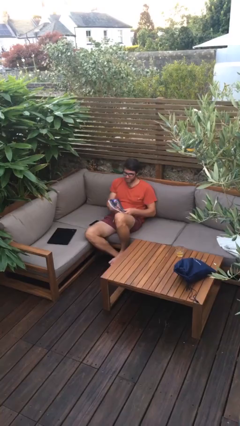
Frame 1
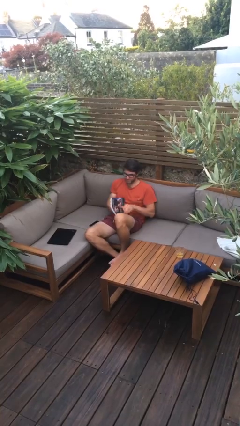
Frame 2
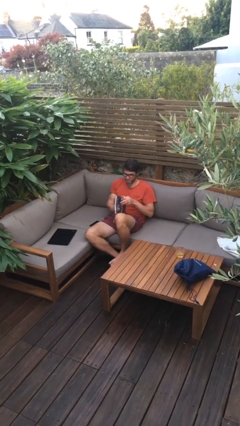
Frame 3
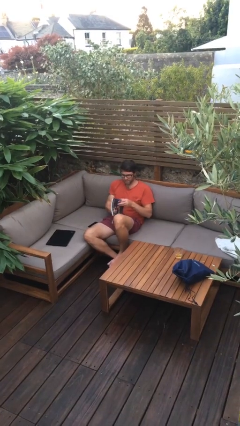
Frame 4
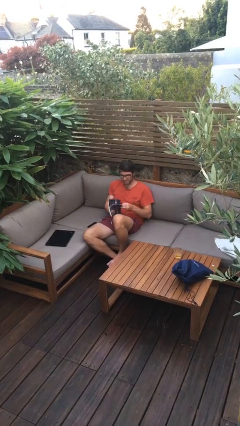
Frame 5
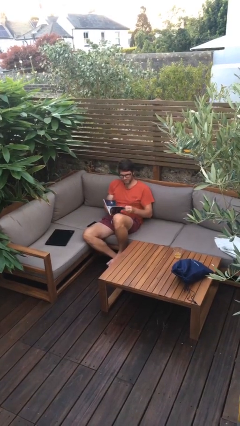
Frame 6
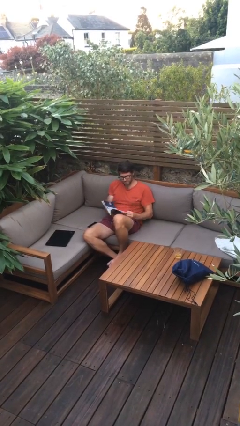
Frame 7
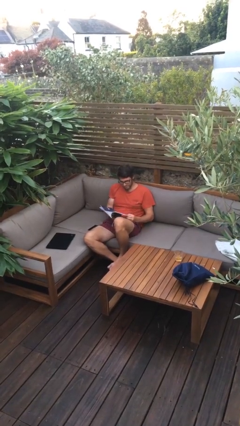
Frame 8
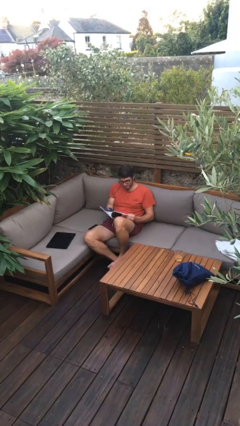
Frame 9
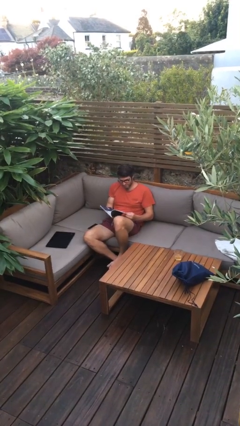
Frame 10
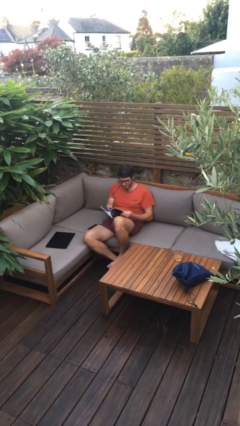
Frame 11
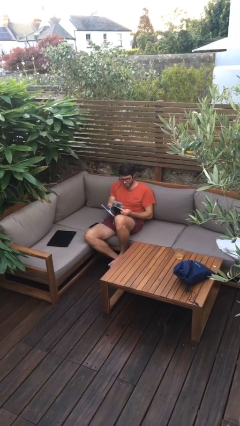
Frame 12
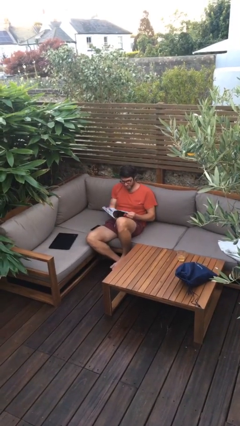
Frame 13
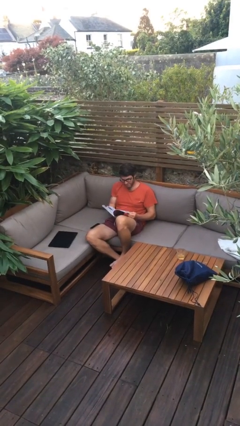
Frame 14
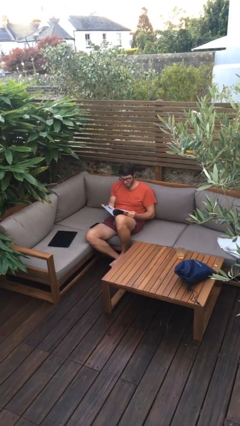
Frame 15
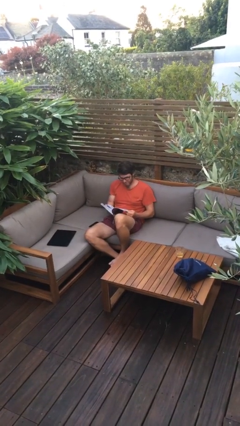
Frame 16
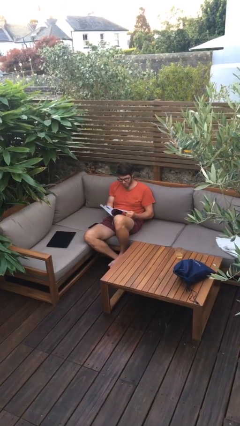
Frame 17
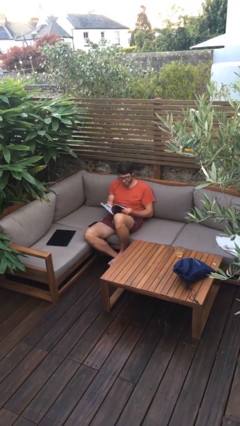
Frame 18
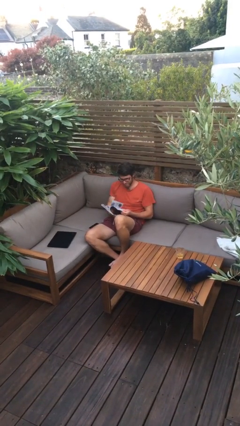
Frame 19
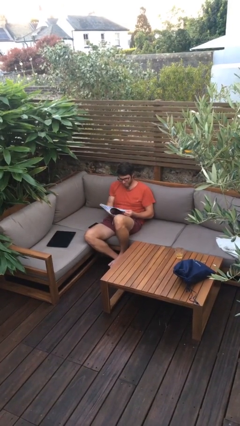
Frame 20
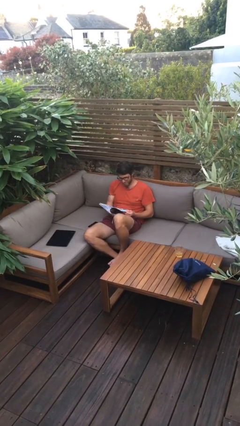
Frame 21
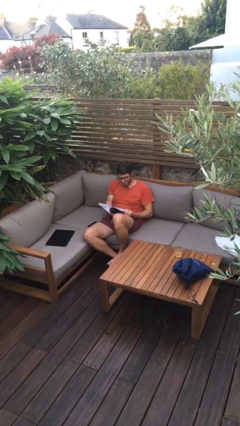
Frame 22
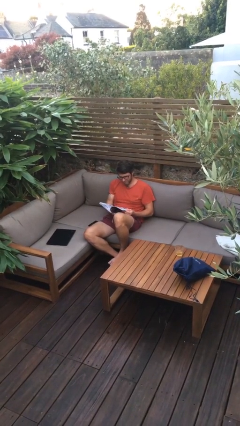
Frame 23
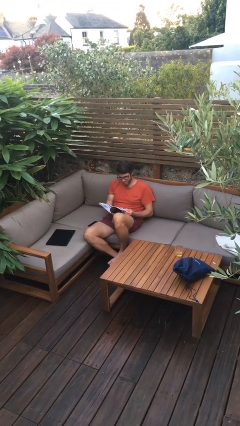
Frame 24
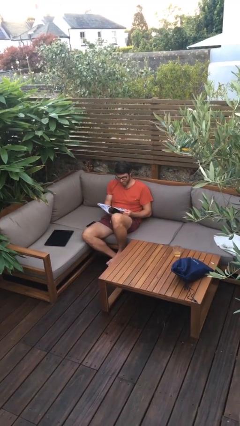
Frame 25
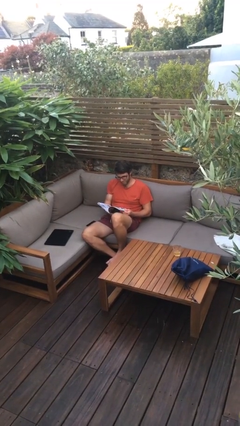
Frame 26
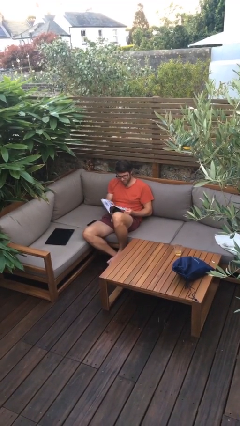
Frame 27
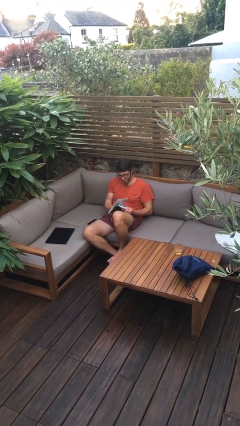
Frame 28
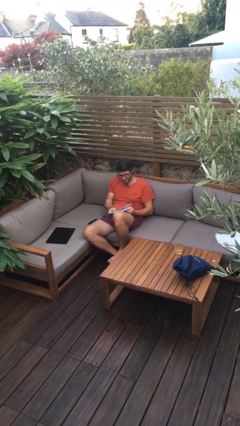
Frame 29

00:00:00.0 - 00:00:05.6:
person reads document

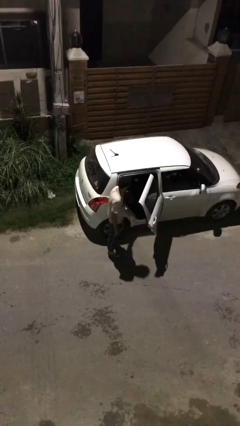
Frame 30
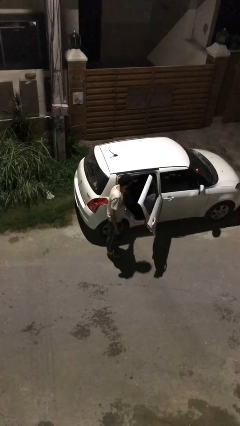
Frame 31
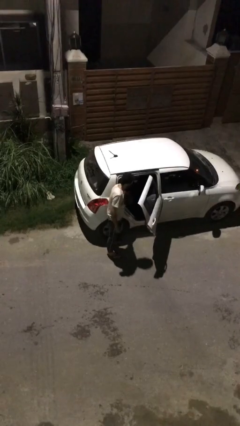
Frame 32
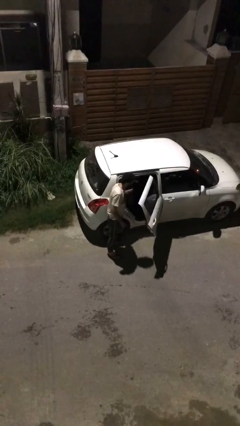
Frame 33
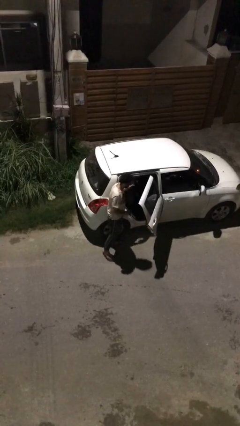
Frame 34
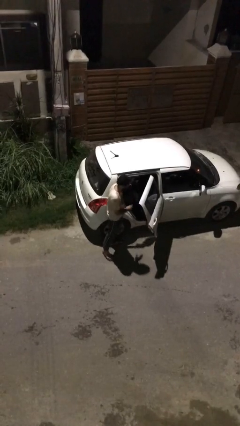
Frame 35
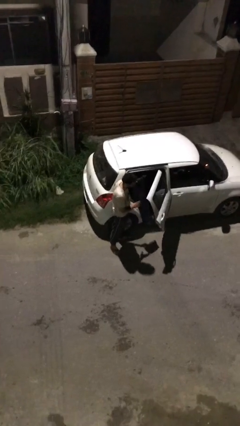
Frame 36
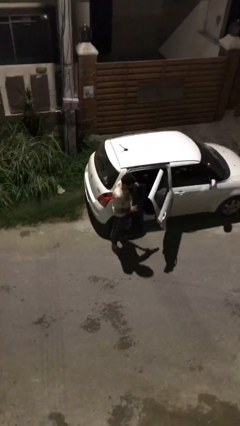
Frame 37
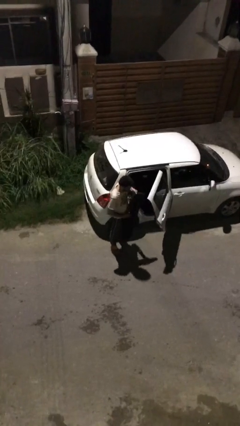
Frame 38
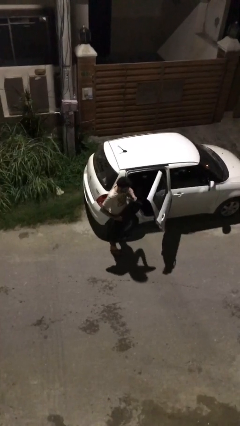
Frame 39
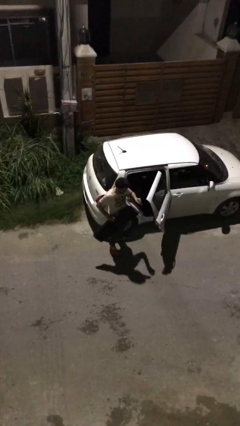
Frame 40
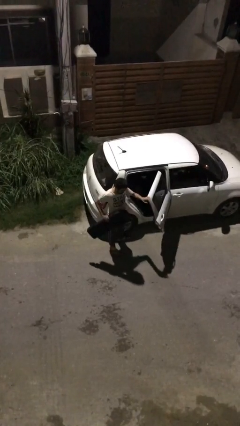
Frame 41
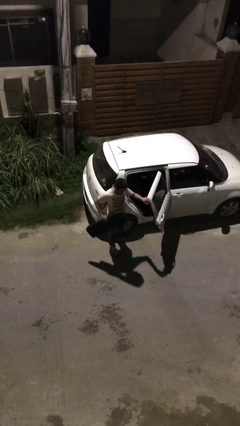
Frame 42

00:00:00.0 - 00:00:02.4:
person unloads car

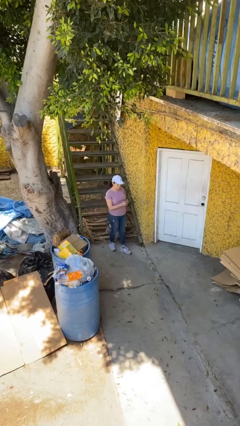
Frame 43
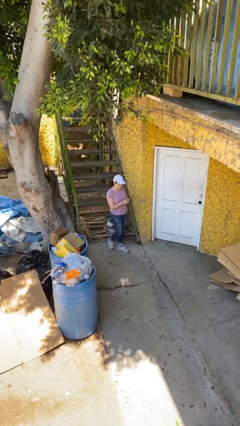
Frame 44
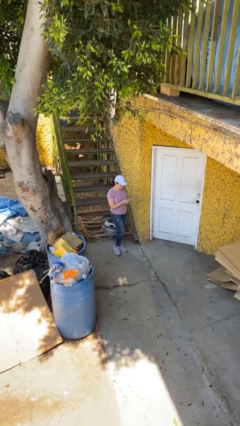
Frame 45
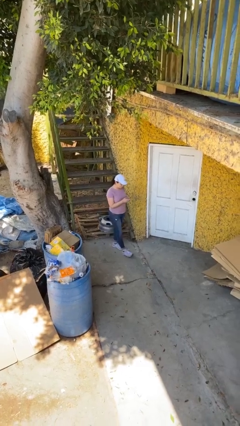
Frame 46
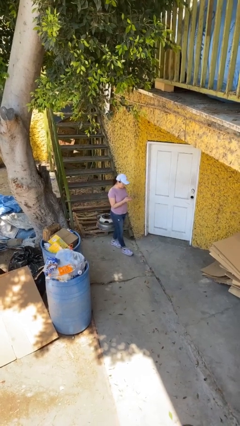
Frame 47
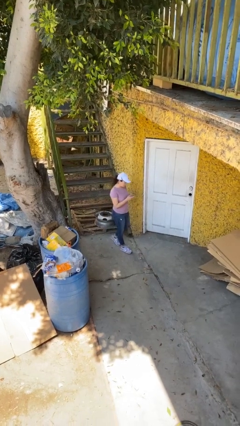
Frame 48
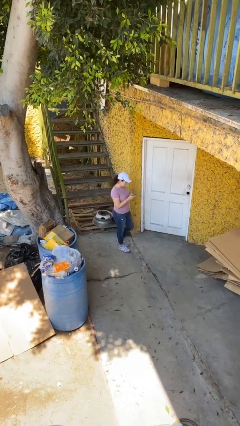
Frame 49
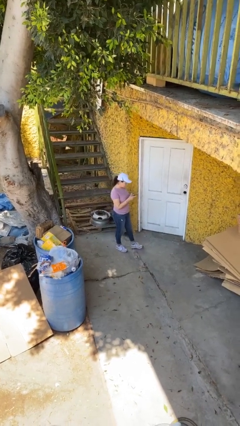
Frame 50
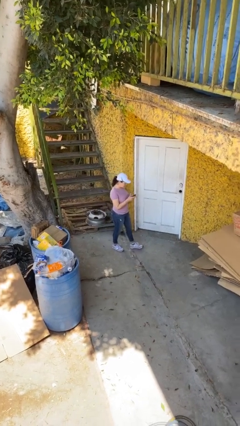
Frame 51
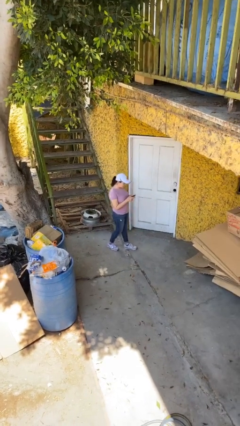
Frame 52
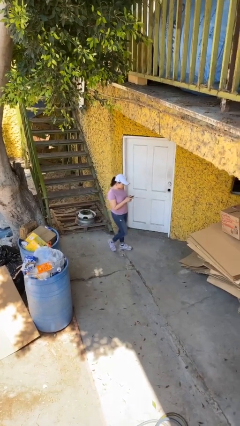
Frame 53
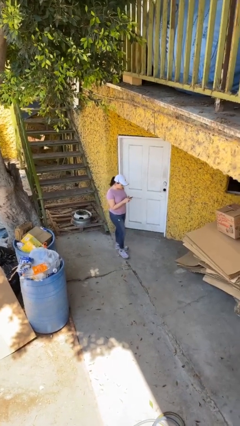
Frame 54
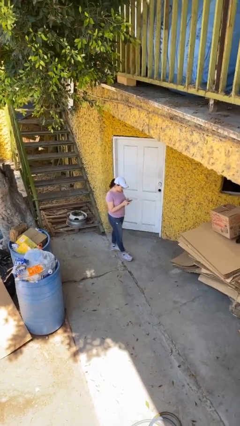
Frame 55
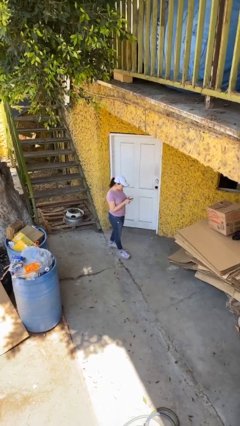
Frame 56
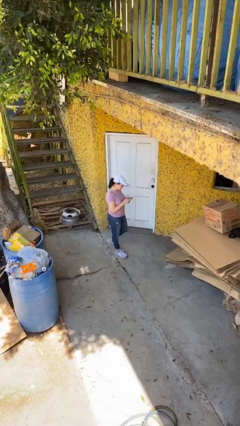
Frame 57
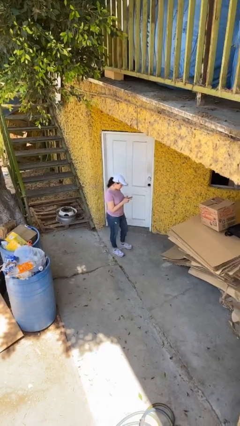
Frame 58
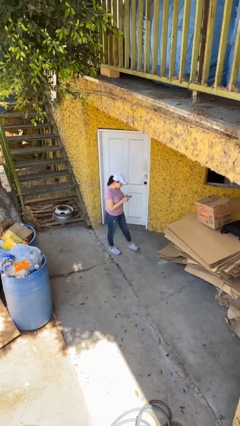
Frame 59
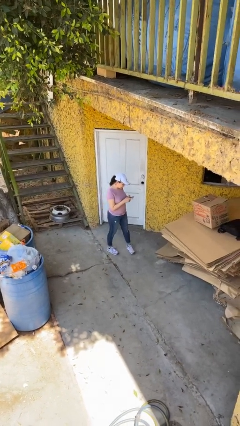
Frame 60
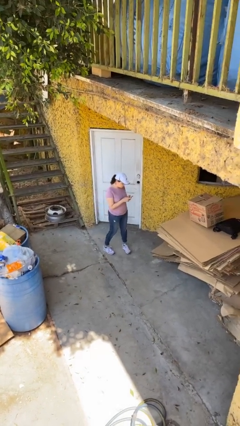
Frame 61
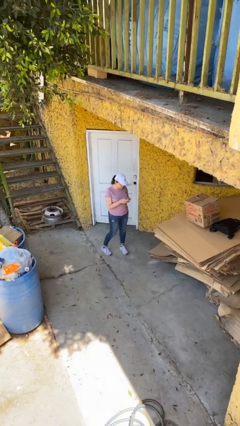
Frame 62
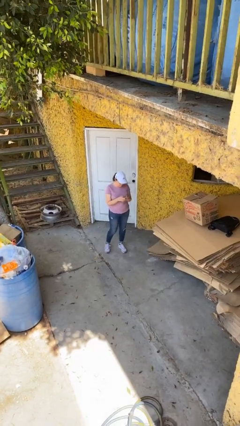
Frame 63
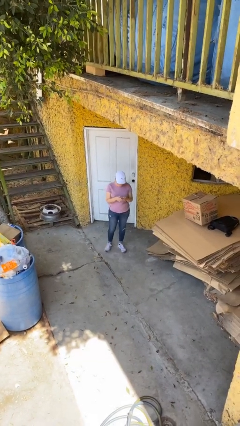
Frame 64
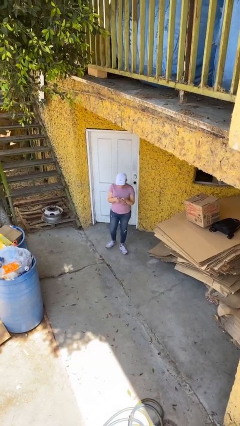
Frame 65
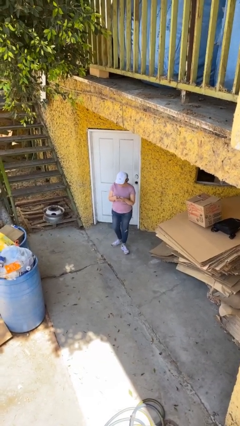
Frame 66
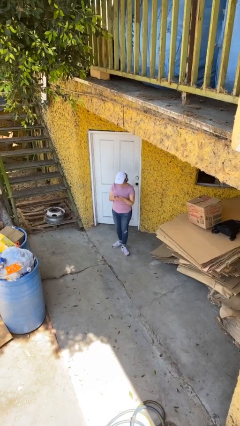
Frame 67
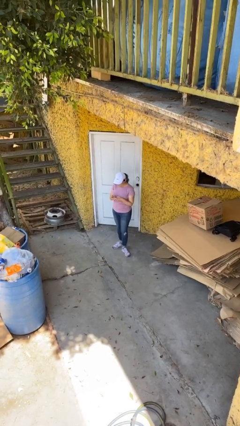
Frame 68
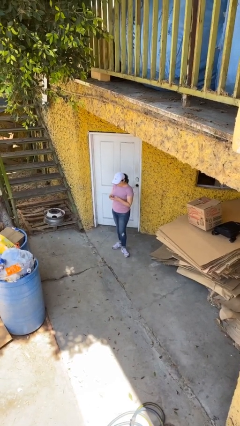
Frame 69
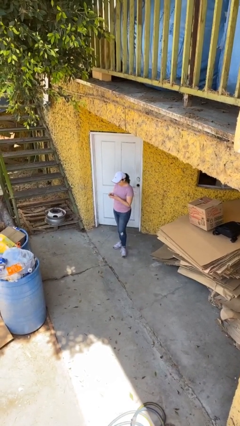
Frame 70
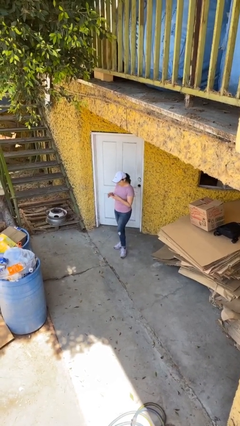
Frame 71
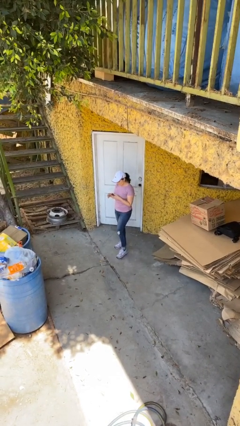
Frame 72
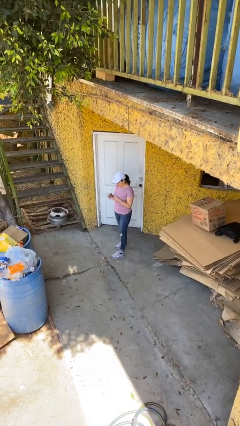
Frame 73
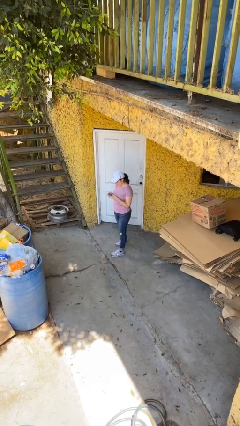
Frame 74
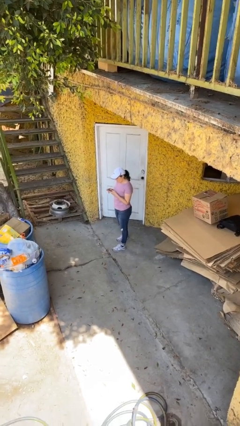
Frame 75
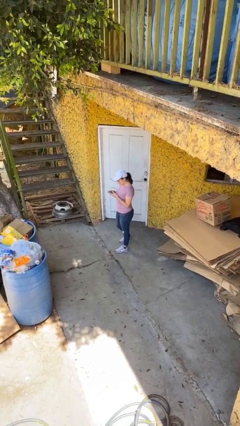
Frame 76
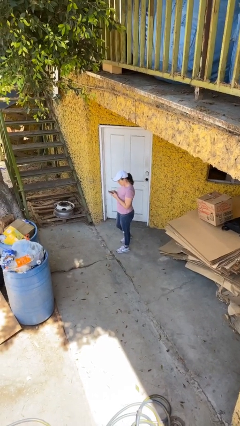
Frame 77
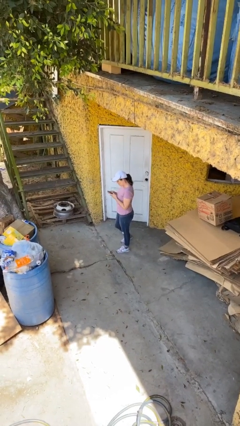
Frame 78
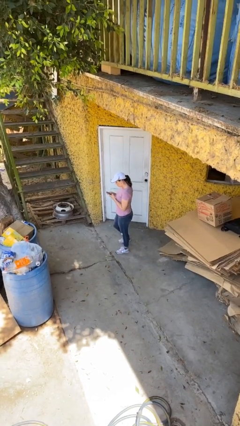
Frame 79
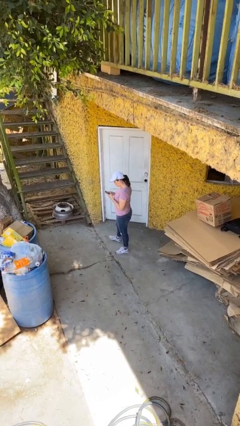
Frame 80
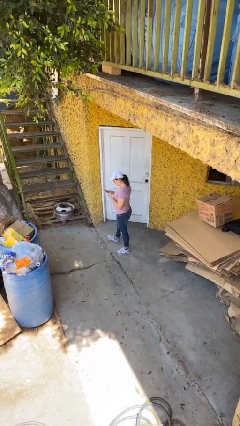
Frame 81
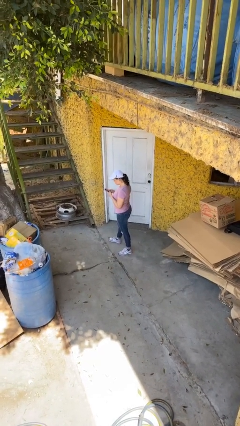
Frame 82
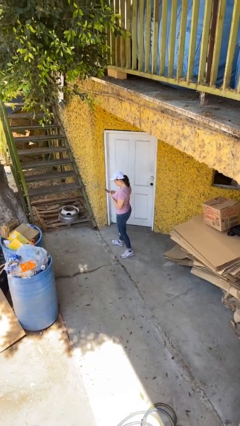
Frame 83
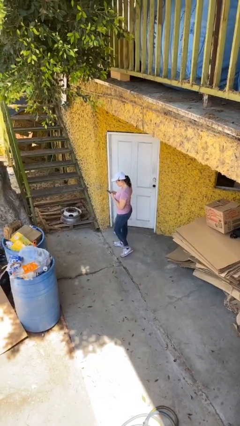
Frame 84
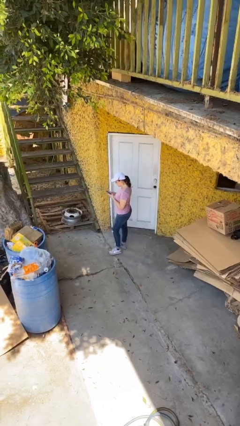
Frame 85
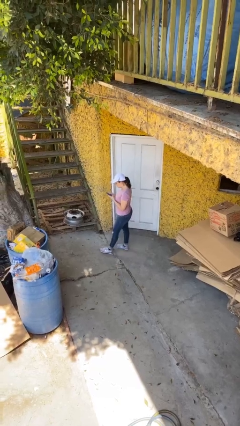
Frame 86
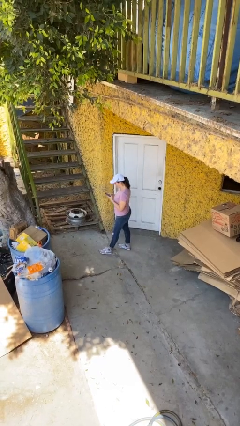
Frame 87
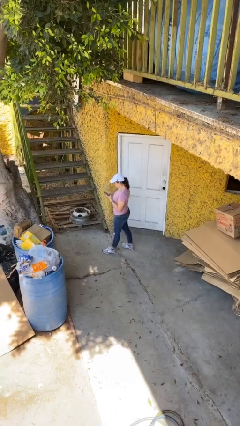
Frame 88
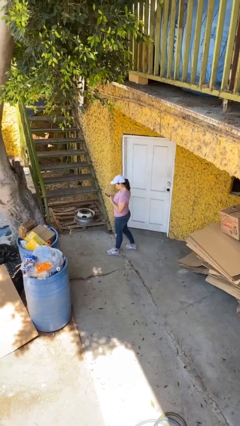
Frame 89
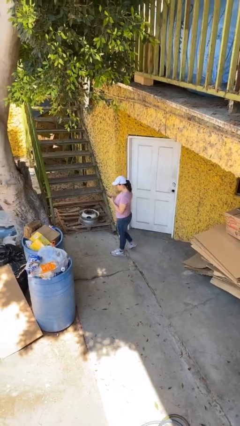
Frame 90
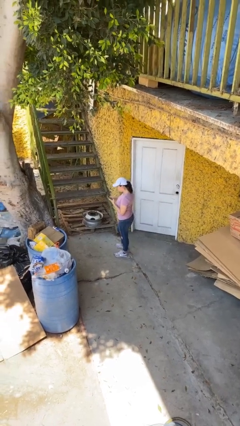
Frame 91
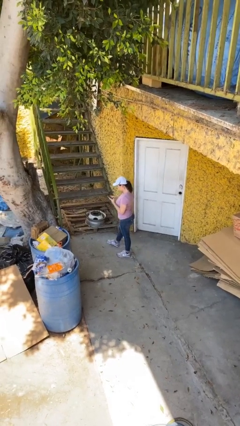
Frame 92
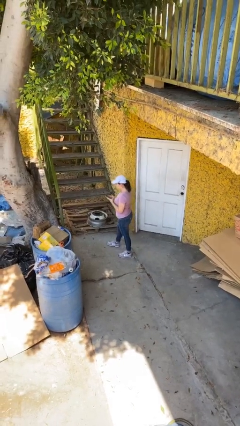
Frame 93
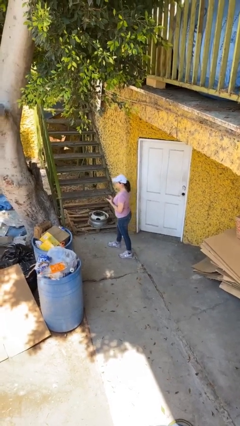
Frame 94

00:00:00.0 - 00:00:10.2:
person texts on phone
